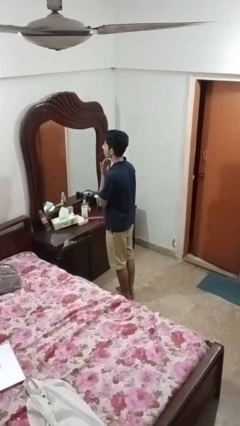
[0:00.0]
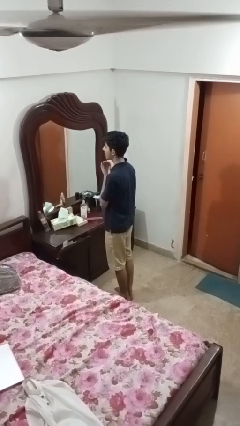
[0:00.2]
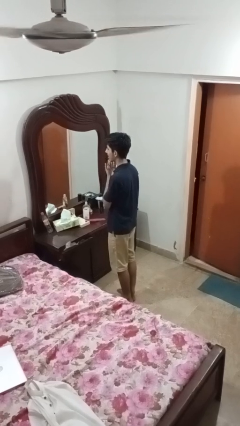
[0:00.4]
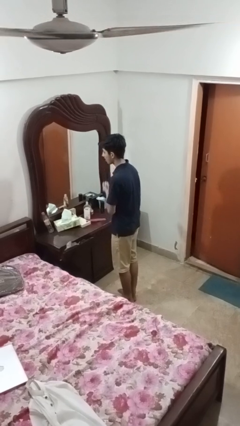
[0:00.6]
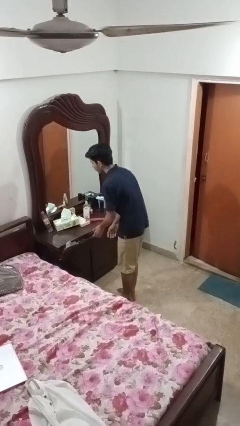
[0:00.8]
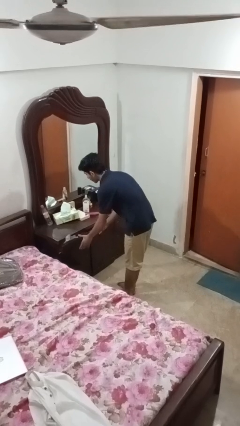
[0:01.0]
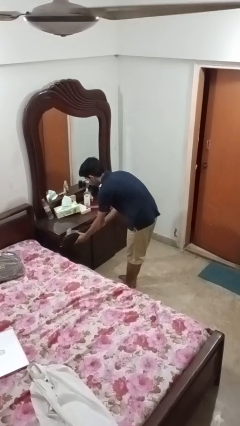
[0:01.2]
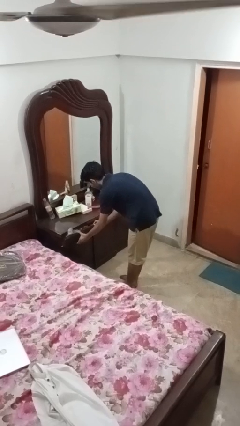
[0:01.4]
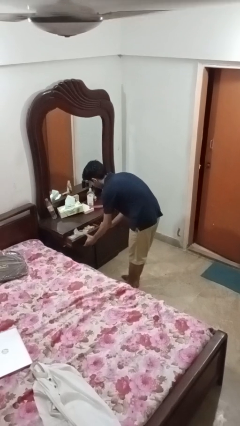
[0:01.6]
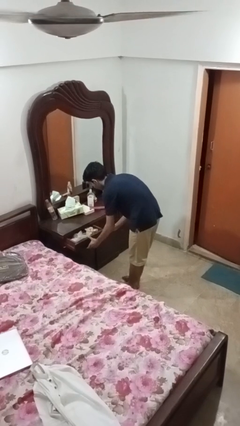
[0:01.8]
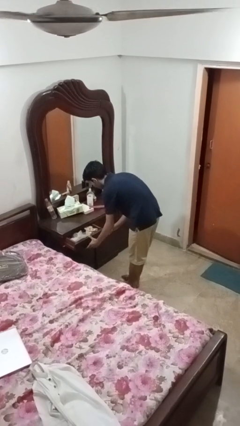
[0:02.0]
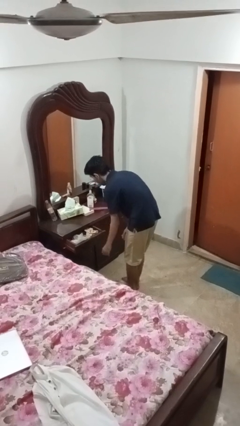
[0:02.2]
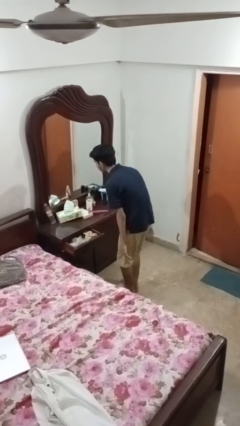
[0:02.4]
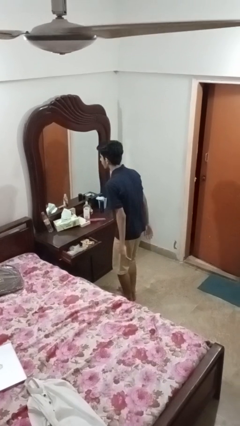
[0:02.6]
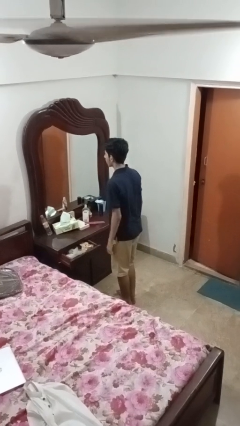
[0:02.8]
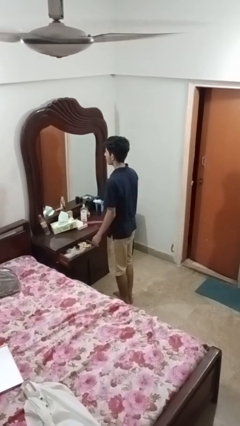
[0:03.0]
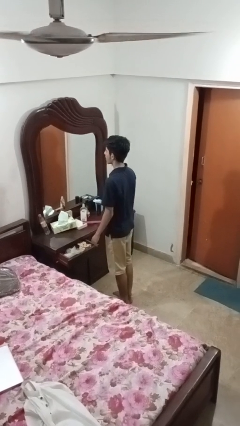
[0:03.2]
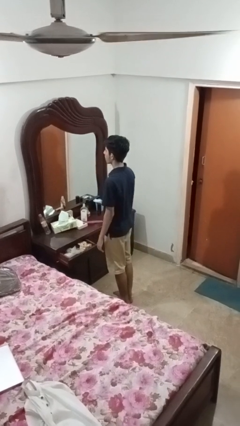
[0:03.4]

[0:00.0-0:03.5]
person opens dresser drawer

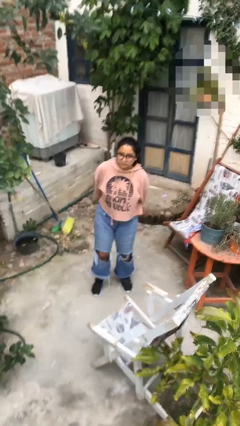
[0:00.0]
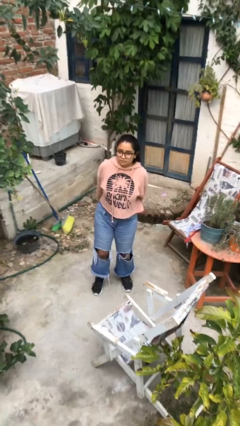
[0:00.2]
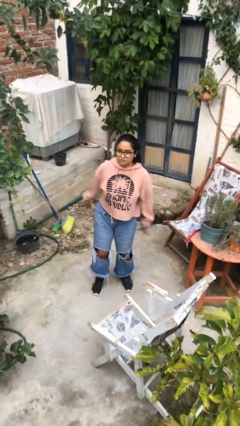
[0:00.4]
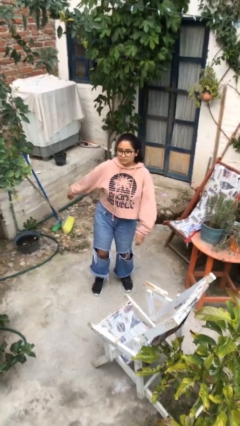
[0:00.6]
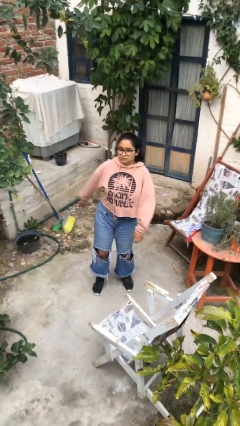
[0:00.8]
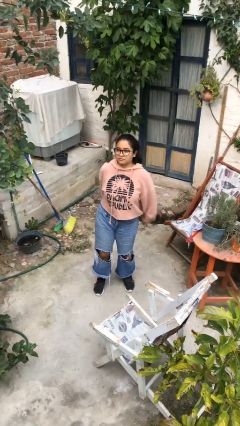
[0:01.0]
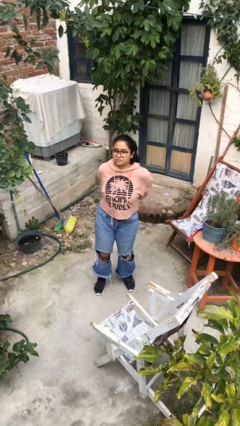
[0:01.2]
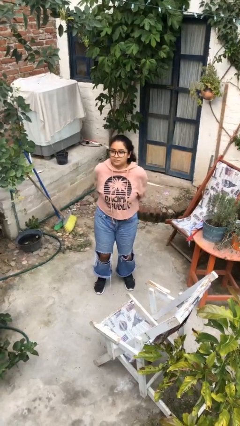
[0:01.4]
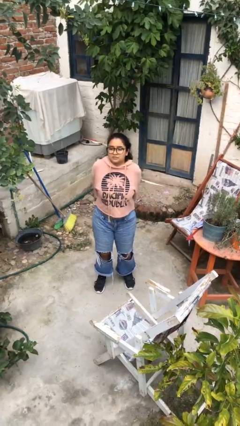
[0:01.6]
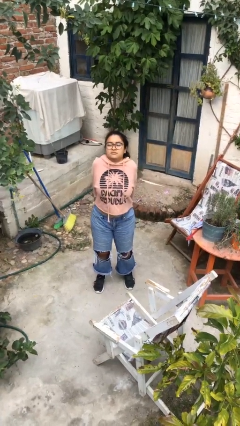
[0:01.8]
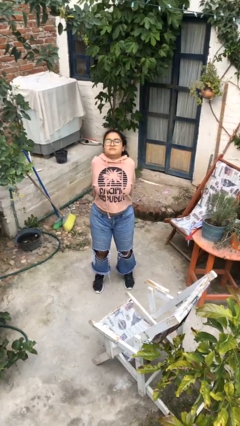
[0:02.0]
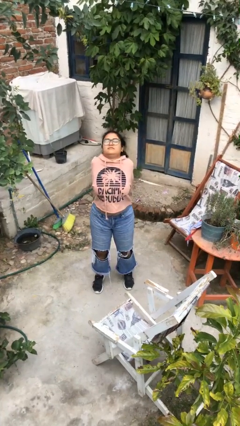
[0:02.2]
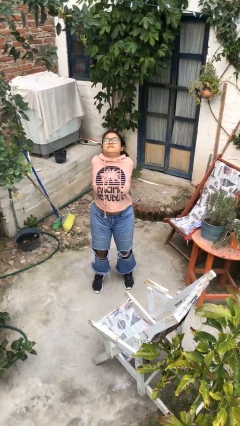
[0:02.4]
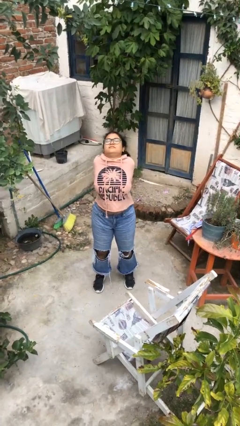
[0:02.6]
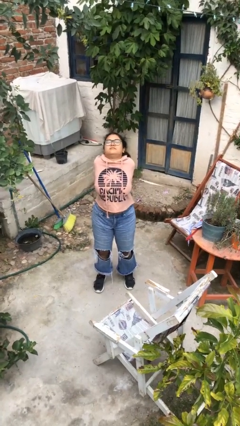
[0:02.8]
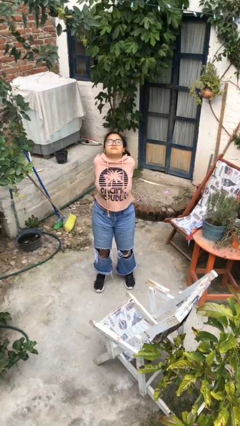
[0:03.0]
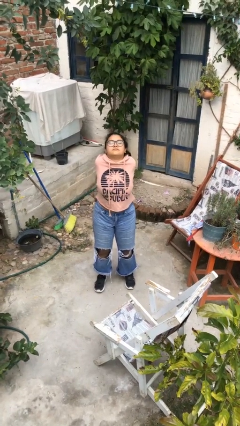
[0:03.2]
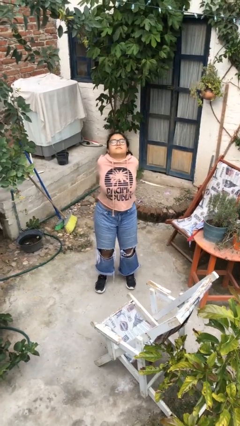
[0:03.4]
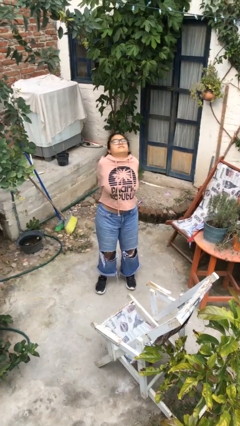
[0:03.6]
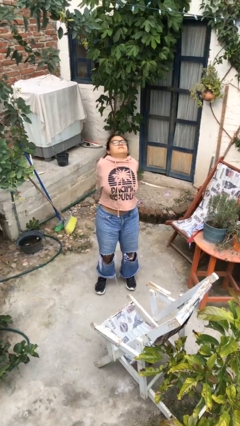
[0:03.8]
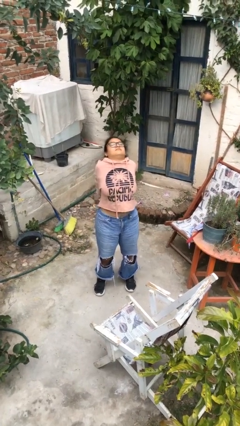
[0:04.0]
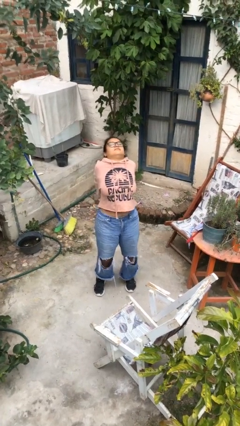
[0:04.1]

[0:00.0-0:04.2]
person stretches back

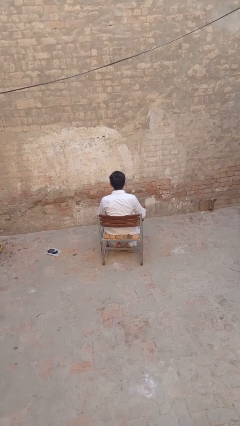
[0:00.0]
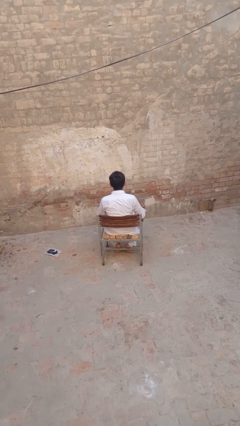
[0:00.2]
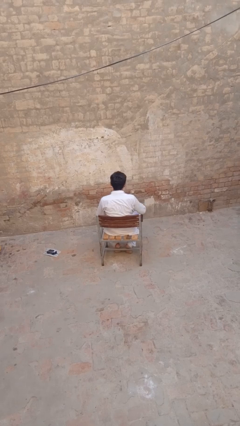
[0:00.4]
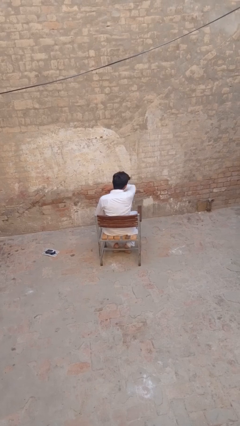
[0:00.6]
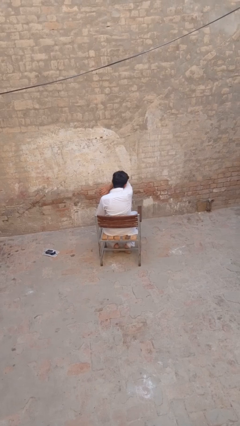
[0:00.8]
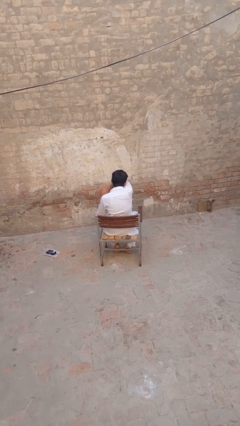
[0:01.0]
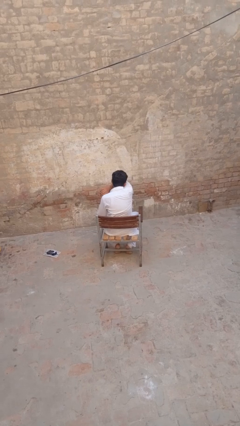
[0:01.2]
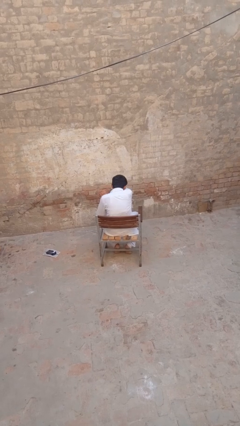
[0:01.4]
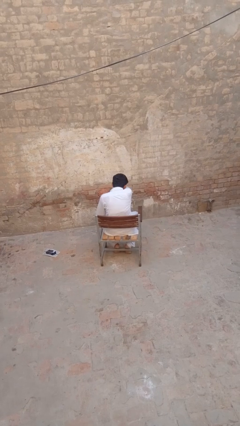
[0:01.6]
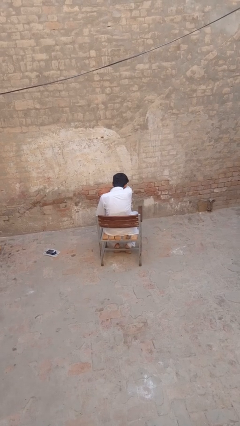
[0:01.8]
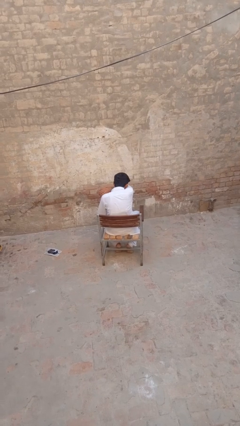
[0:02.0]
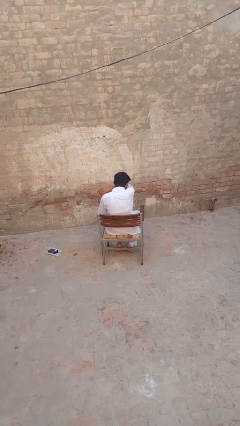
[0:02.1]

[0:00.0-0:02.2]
person sneezes into arm

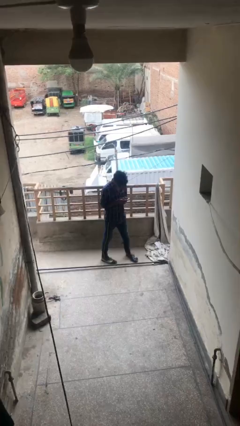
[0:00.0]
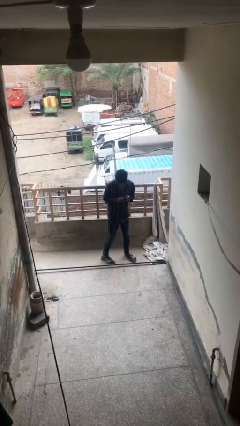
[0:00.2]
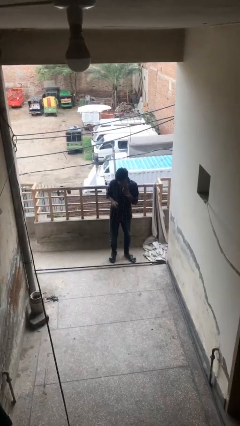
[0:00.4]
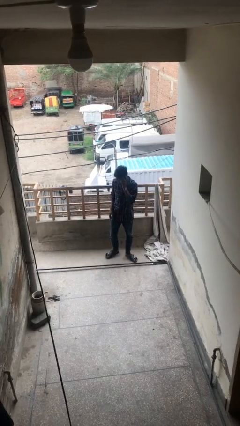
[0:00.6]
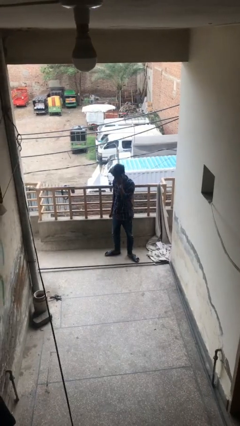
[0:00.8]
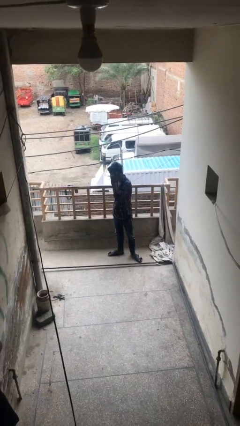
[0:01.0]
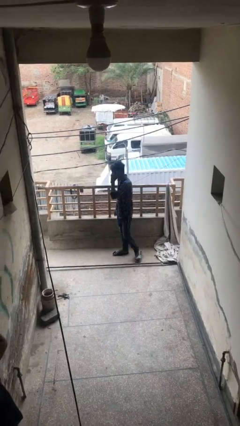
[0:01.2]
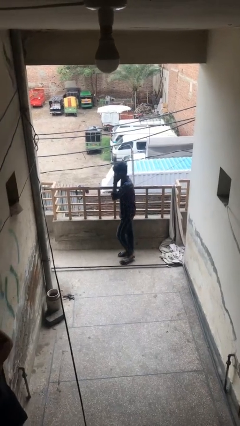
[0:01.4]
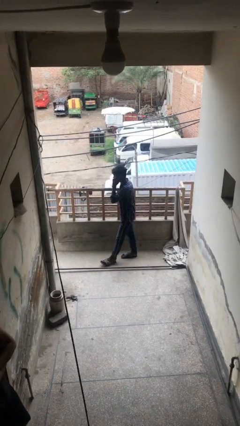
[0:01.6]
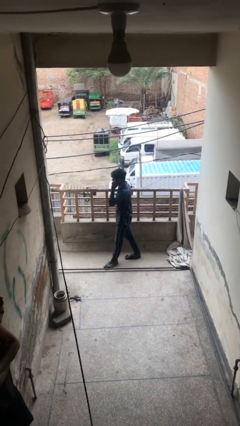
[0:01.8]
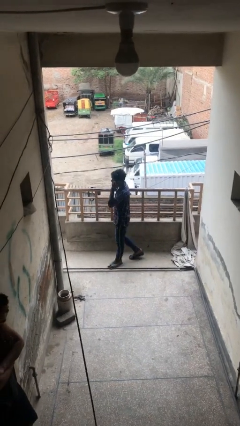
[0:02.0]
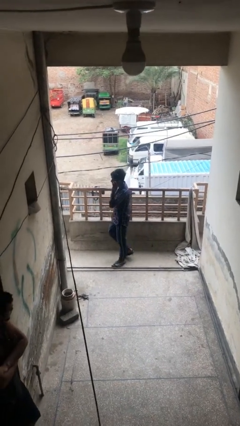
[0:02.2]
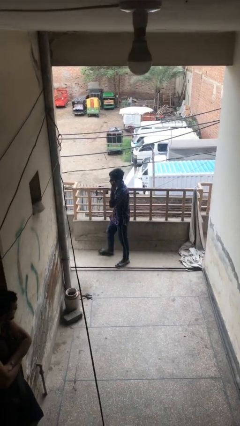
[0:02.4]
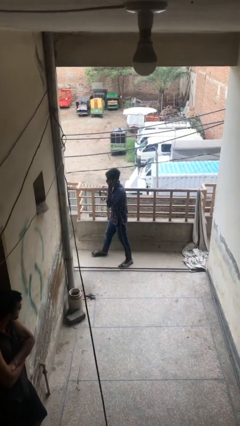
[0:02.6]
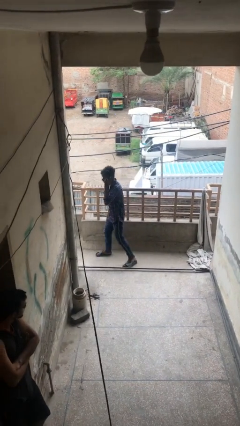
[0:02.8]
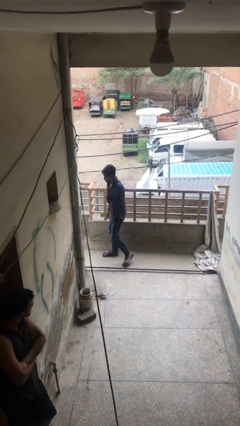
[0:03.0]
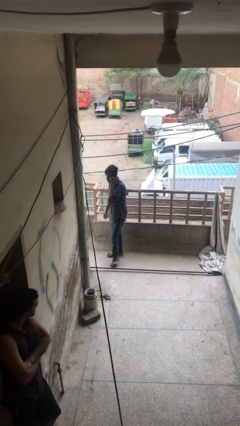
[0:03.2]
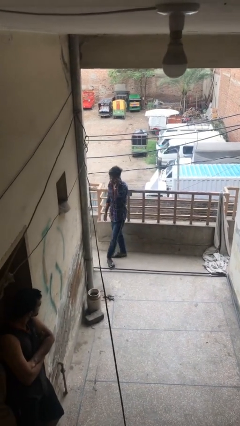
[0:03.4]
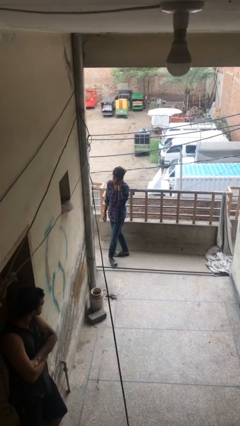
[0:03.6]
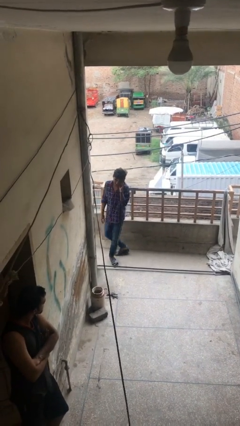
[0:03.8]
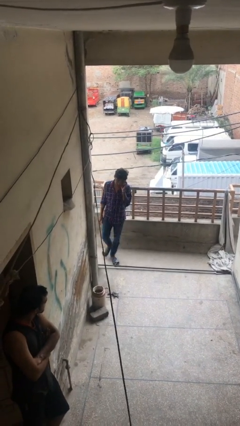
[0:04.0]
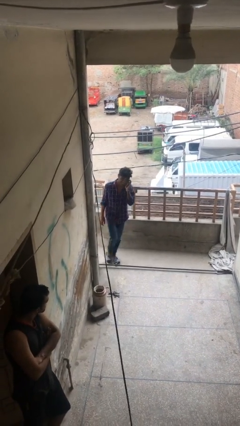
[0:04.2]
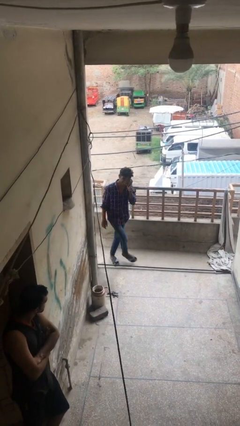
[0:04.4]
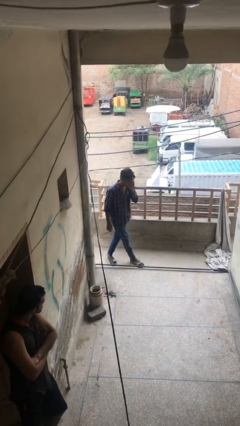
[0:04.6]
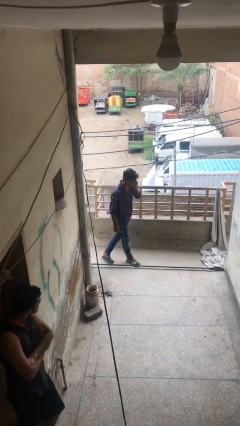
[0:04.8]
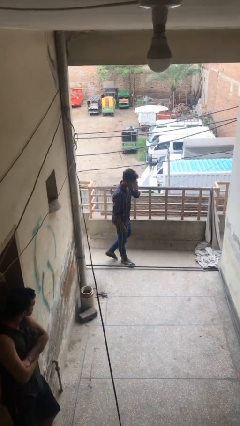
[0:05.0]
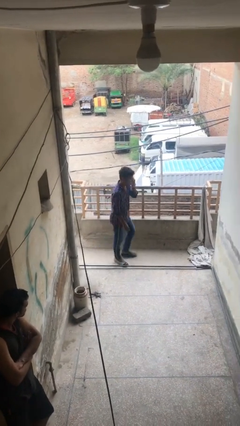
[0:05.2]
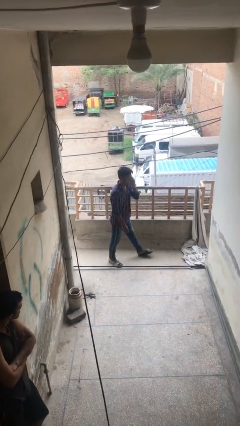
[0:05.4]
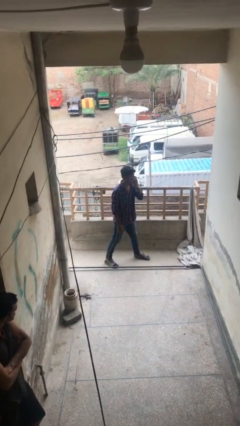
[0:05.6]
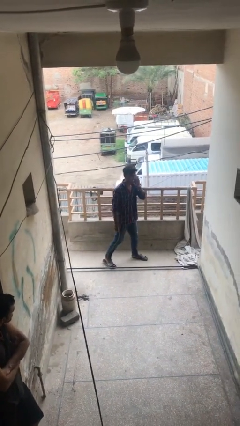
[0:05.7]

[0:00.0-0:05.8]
person talks on phone

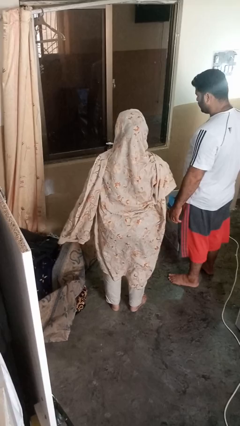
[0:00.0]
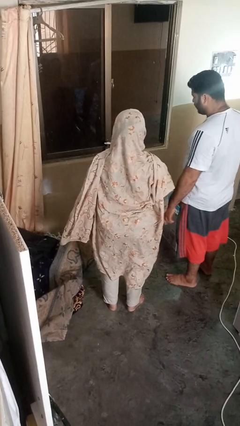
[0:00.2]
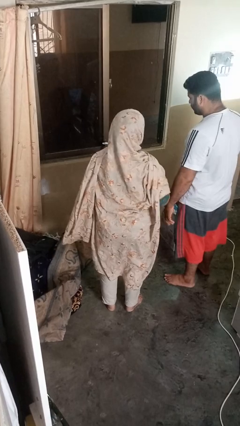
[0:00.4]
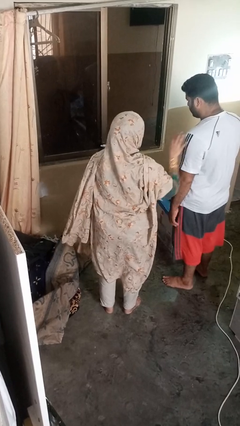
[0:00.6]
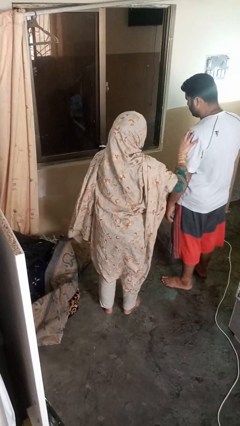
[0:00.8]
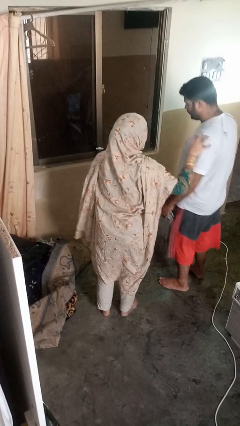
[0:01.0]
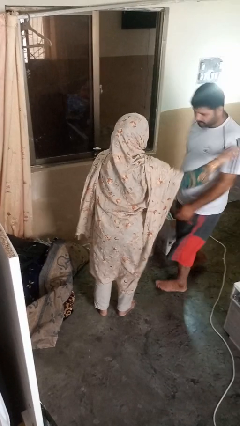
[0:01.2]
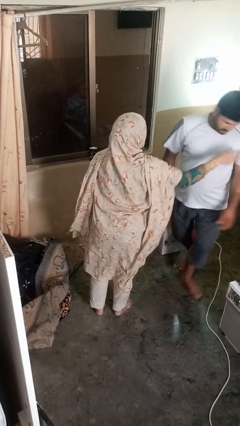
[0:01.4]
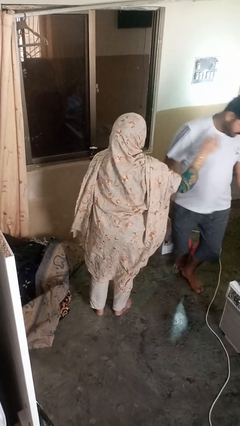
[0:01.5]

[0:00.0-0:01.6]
person grabs person by shoulder

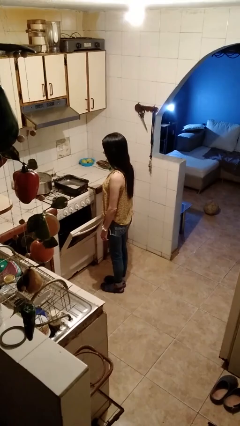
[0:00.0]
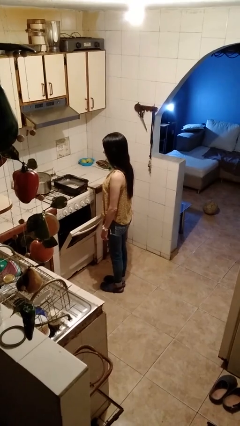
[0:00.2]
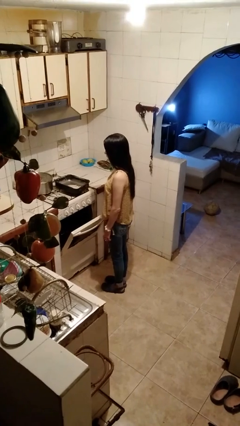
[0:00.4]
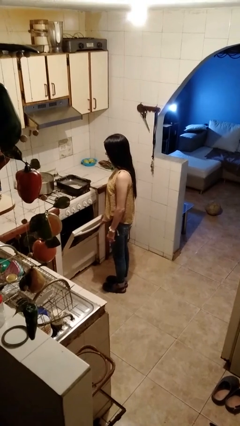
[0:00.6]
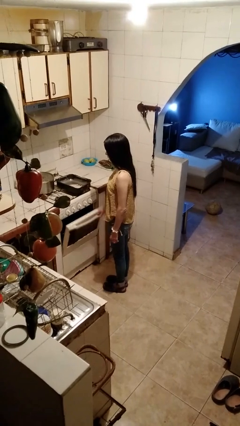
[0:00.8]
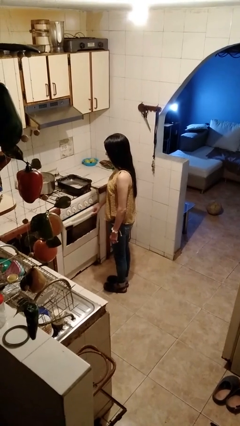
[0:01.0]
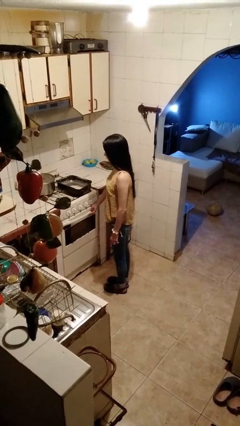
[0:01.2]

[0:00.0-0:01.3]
person closes oven door
